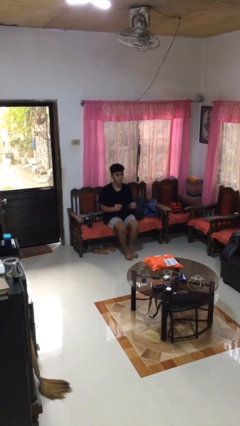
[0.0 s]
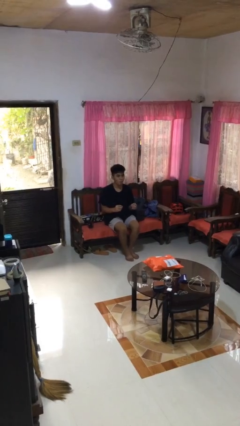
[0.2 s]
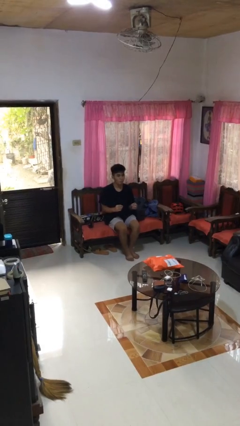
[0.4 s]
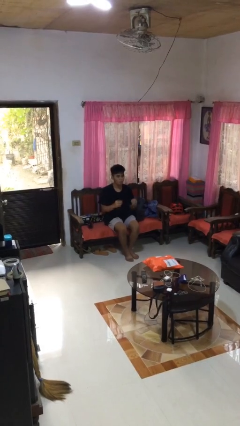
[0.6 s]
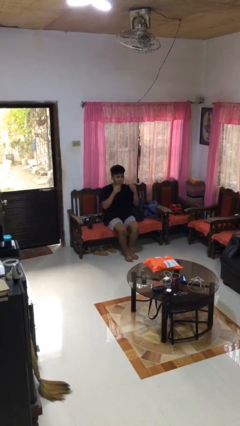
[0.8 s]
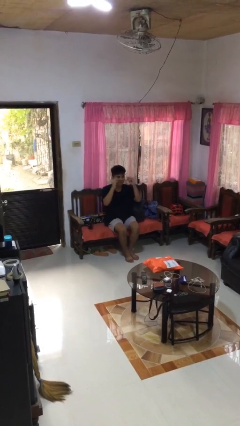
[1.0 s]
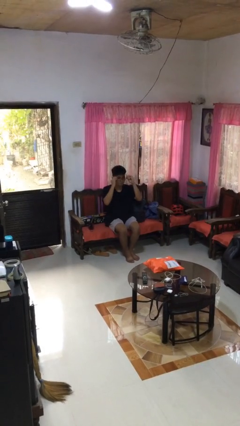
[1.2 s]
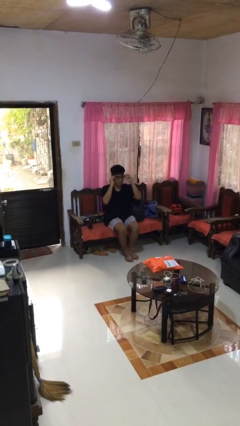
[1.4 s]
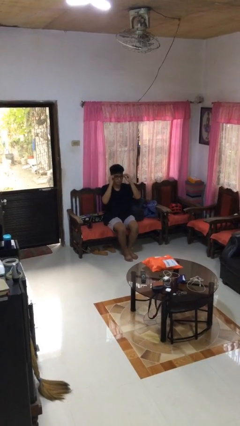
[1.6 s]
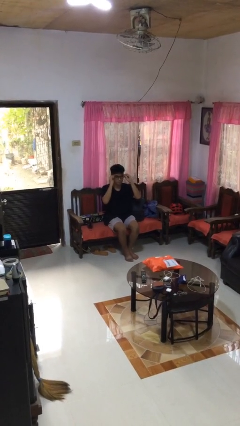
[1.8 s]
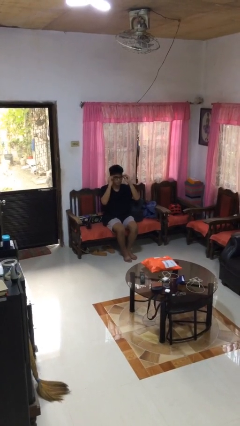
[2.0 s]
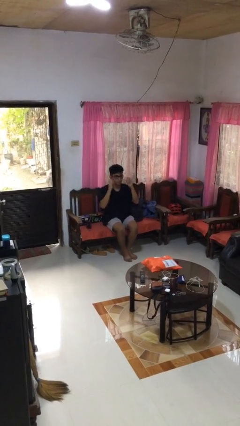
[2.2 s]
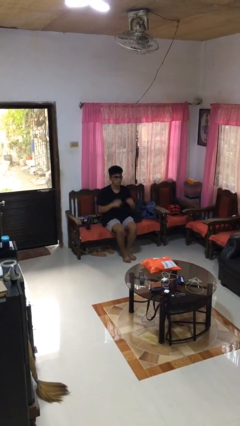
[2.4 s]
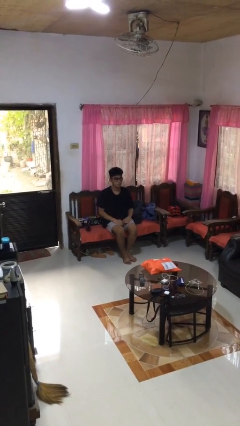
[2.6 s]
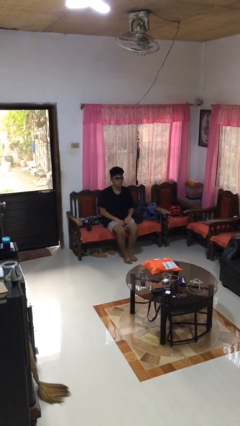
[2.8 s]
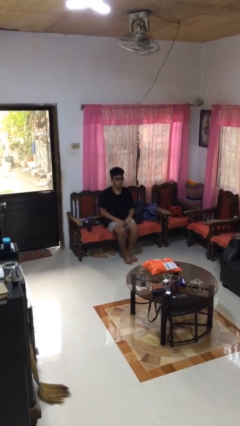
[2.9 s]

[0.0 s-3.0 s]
person puts on glasses

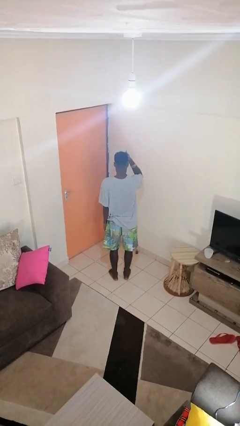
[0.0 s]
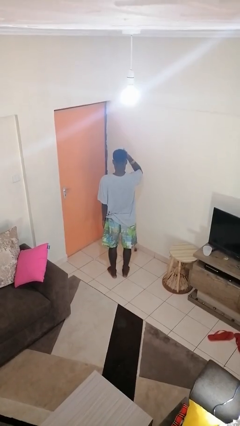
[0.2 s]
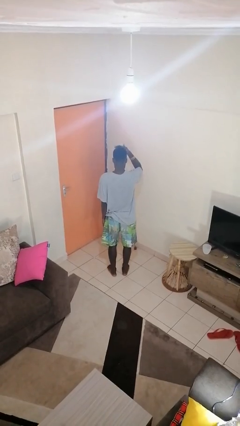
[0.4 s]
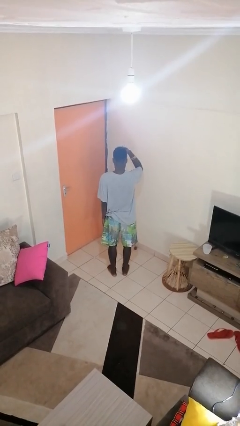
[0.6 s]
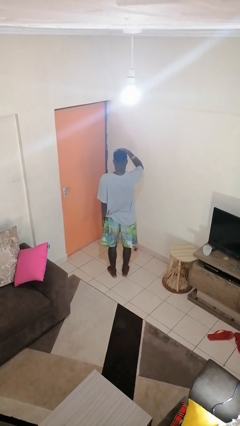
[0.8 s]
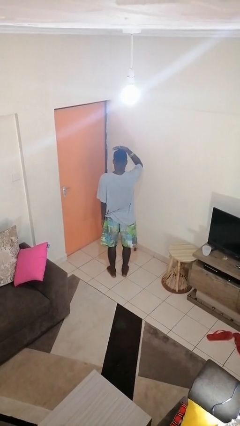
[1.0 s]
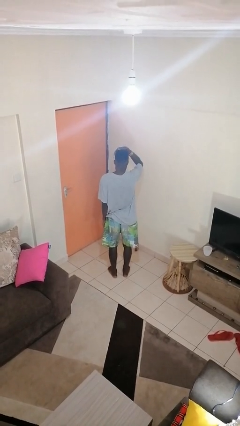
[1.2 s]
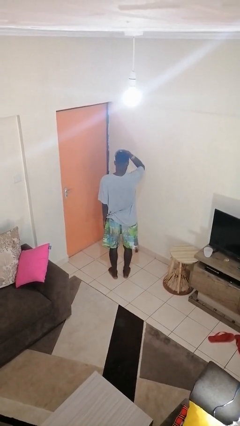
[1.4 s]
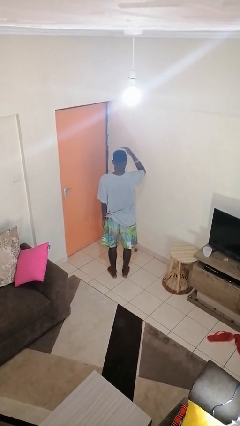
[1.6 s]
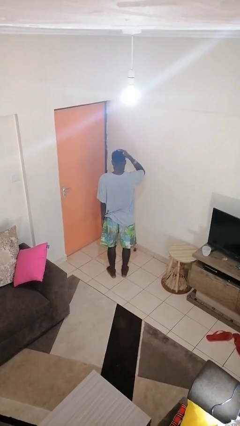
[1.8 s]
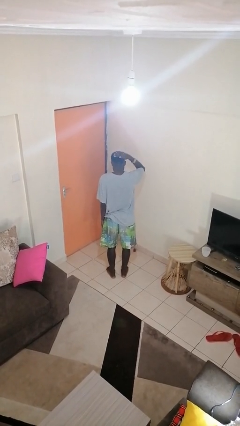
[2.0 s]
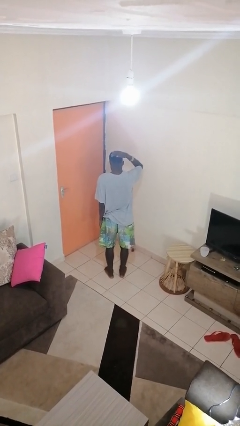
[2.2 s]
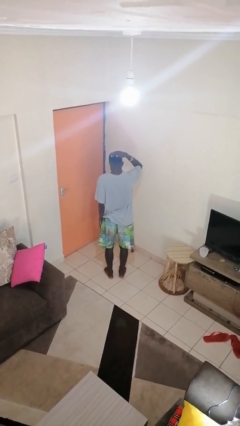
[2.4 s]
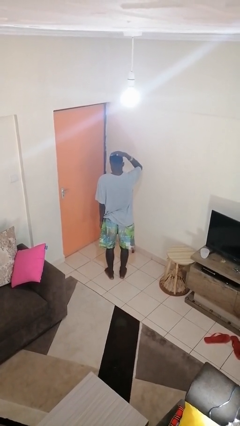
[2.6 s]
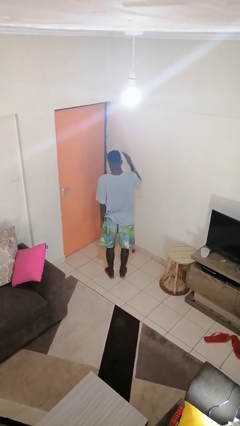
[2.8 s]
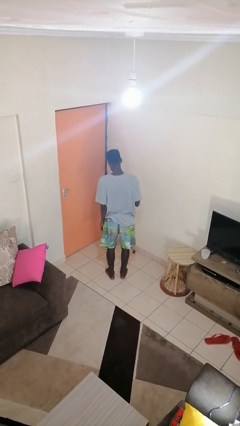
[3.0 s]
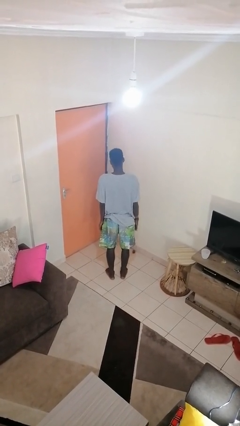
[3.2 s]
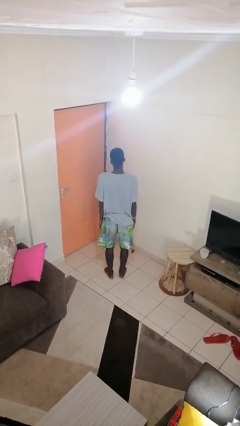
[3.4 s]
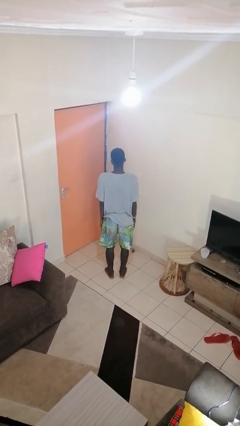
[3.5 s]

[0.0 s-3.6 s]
person pats head

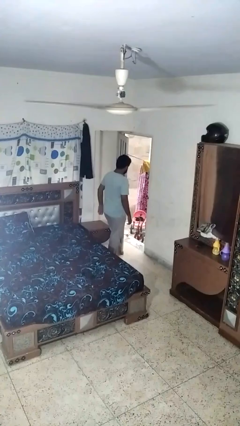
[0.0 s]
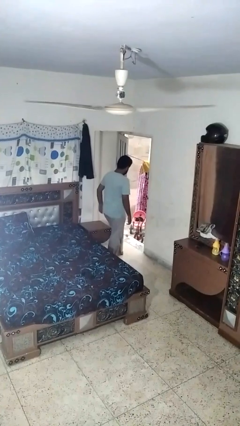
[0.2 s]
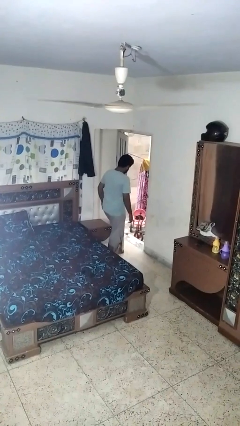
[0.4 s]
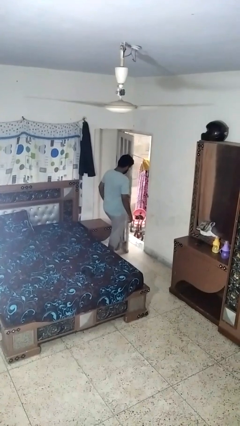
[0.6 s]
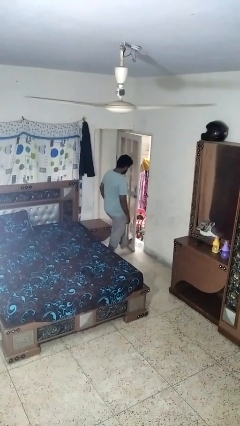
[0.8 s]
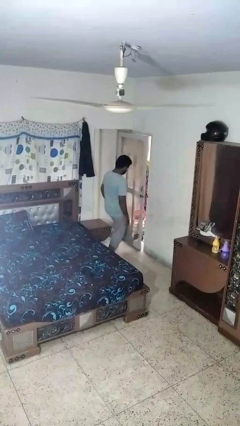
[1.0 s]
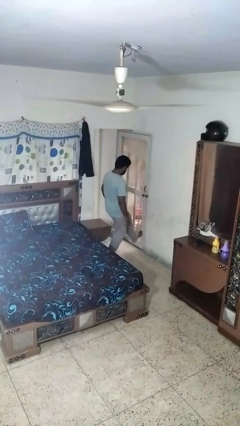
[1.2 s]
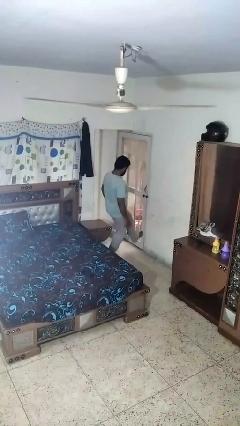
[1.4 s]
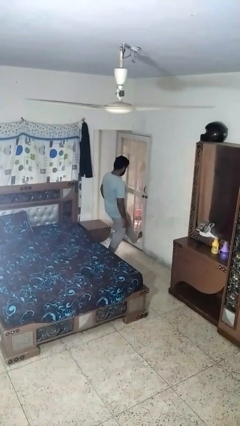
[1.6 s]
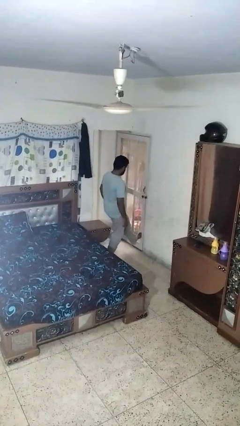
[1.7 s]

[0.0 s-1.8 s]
person closes door with foot

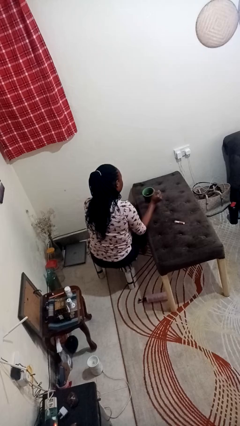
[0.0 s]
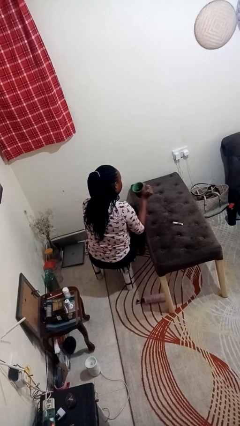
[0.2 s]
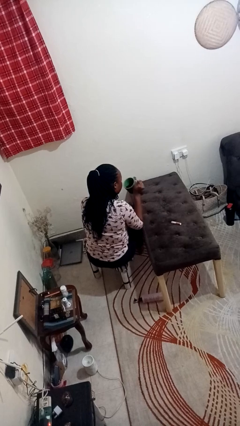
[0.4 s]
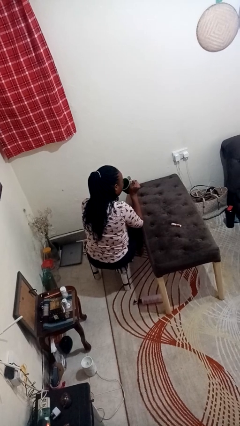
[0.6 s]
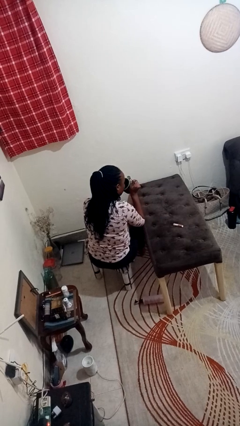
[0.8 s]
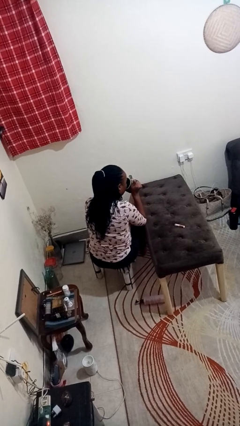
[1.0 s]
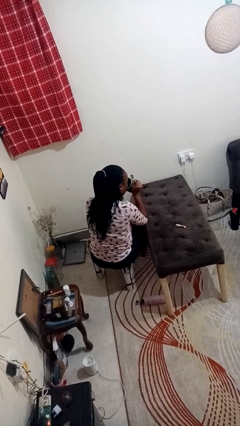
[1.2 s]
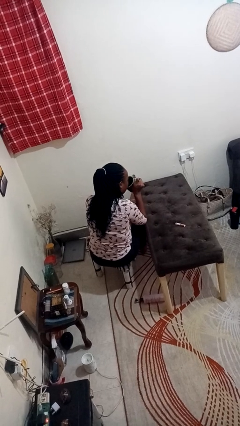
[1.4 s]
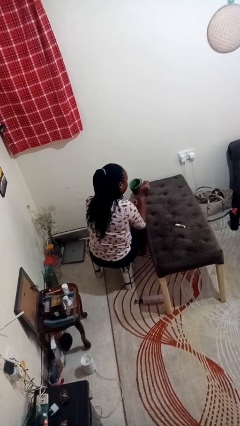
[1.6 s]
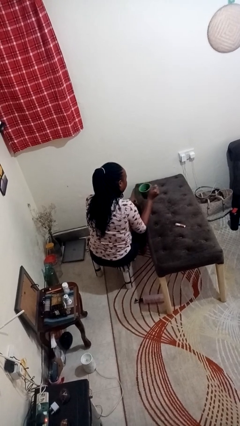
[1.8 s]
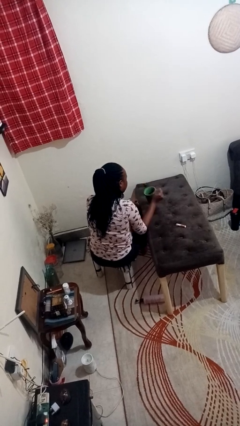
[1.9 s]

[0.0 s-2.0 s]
person drinks from mug

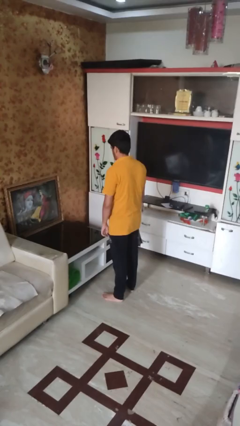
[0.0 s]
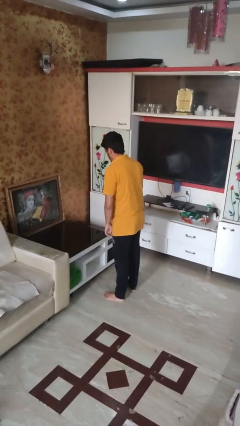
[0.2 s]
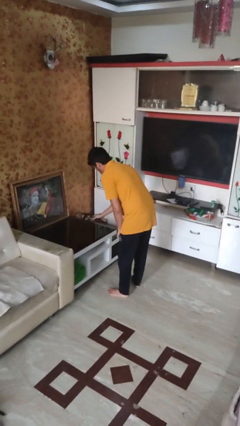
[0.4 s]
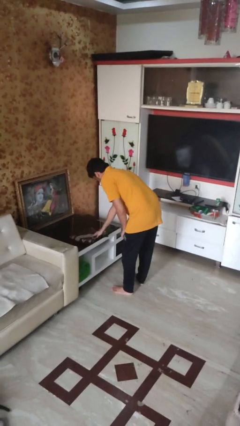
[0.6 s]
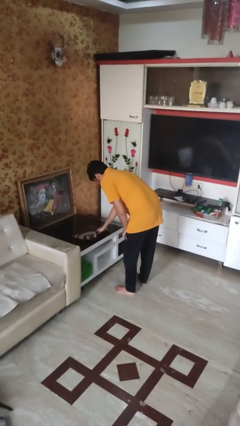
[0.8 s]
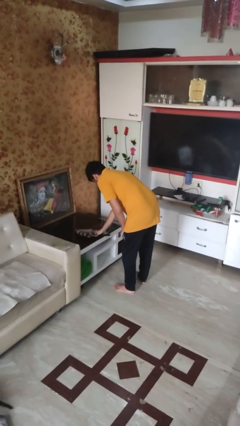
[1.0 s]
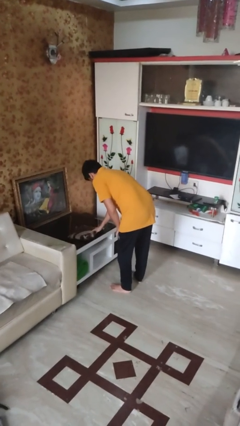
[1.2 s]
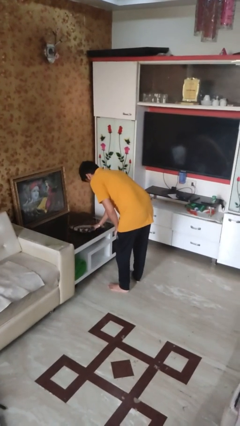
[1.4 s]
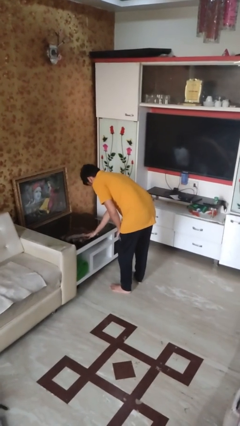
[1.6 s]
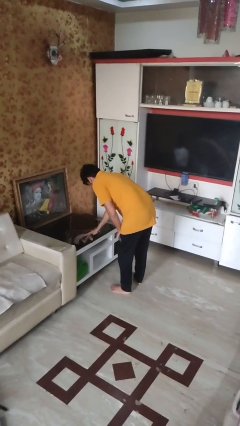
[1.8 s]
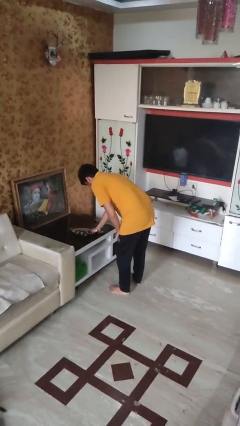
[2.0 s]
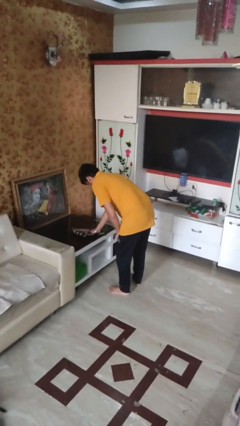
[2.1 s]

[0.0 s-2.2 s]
person cleans table with rag

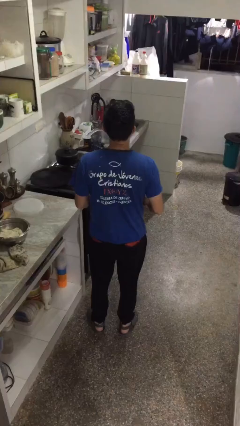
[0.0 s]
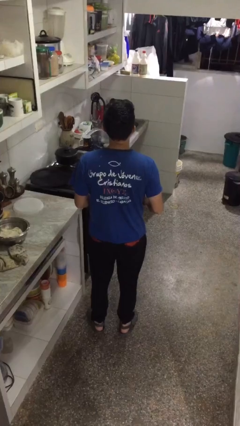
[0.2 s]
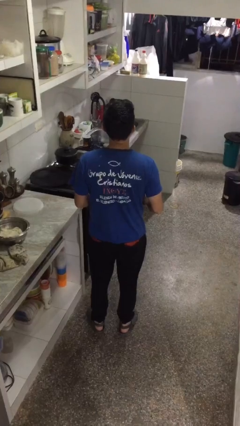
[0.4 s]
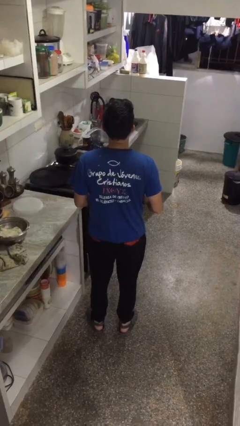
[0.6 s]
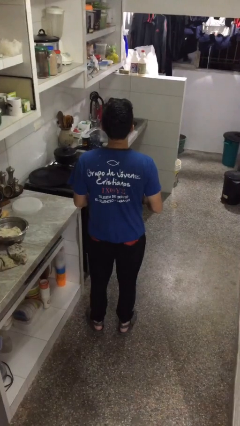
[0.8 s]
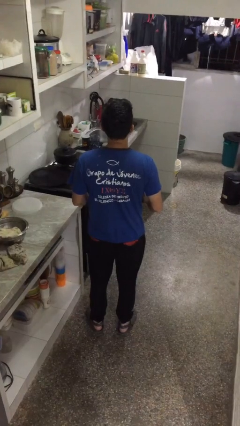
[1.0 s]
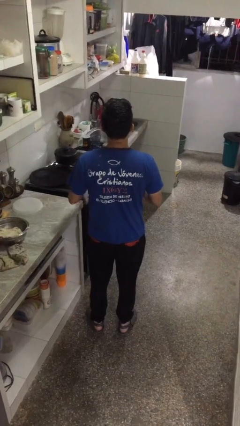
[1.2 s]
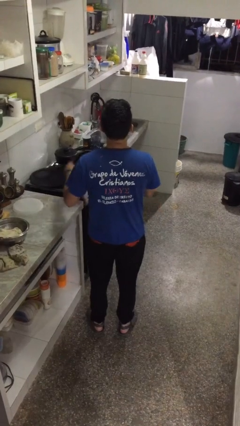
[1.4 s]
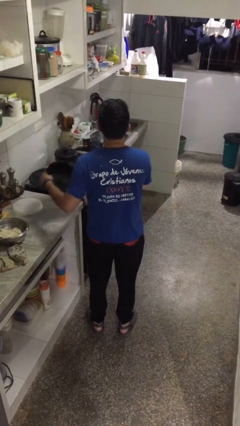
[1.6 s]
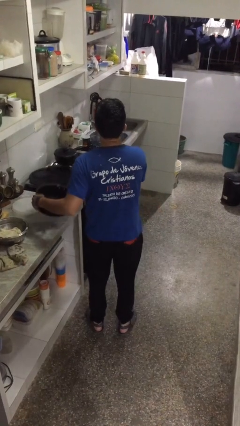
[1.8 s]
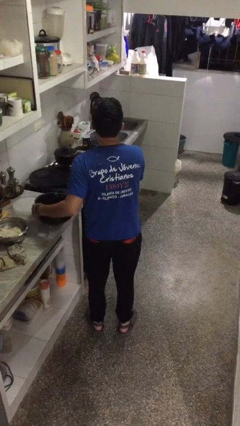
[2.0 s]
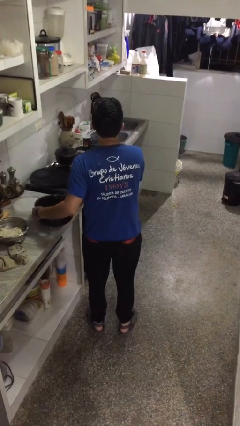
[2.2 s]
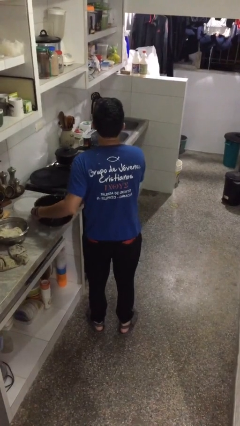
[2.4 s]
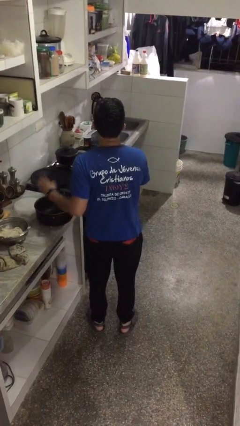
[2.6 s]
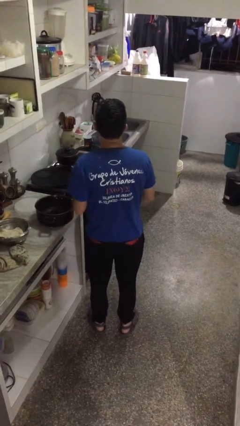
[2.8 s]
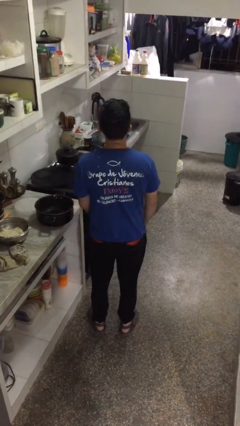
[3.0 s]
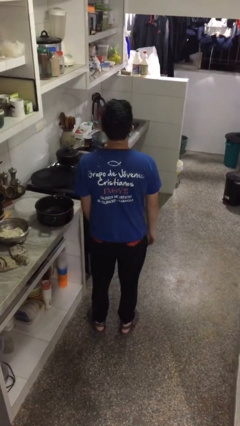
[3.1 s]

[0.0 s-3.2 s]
person puts down object on countertop

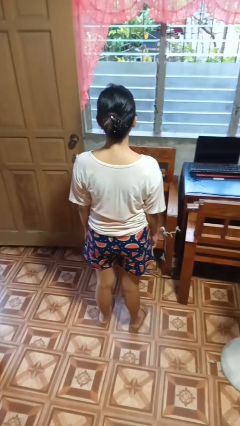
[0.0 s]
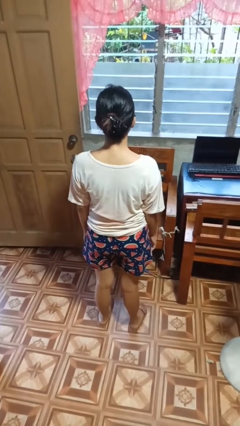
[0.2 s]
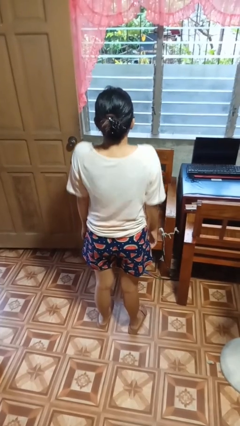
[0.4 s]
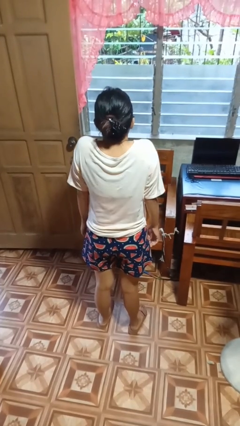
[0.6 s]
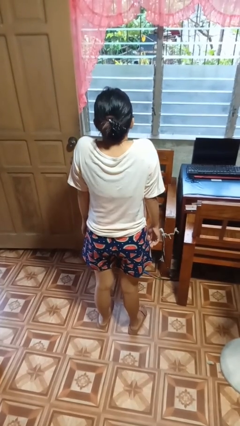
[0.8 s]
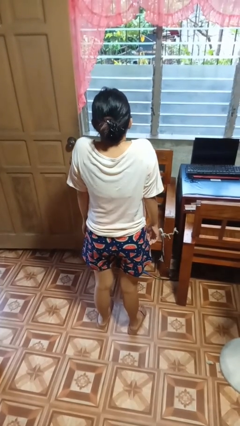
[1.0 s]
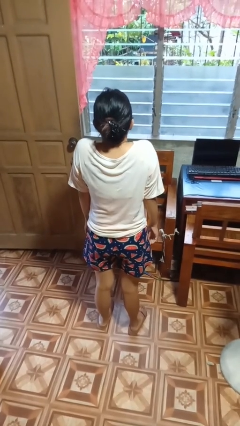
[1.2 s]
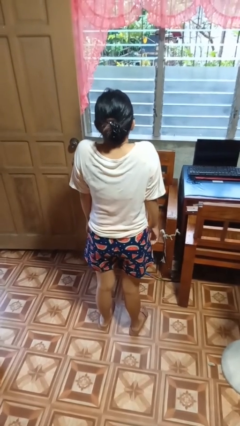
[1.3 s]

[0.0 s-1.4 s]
person shrugs
